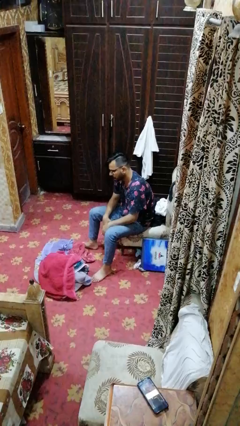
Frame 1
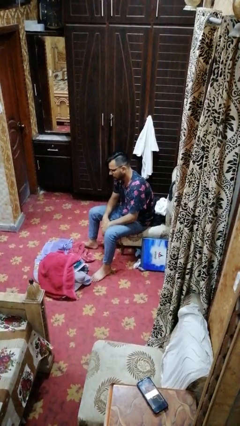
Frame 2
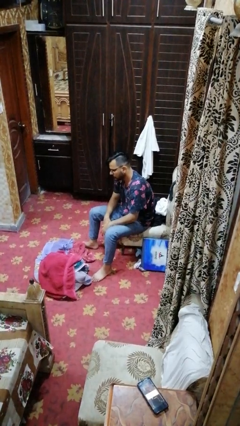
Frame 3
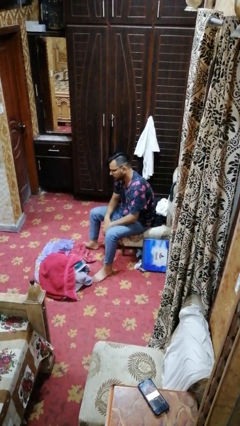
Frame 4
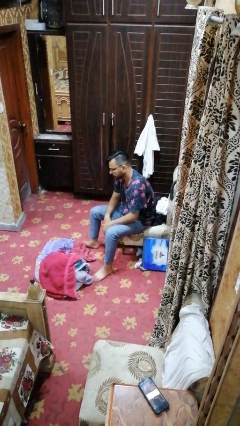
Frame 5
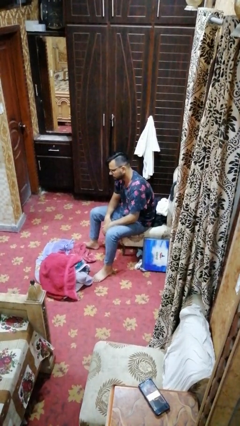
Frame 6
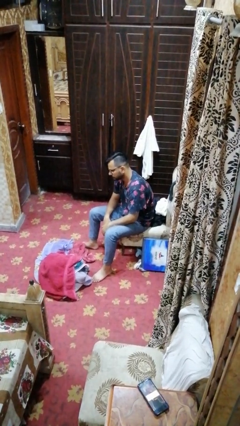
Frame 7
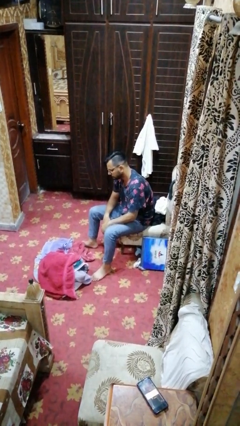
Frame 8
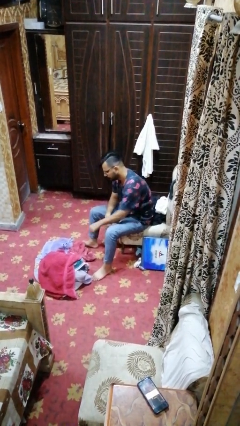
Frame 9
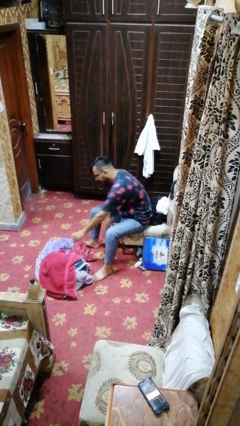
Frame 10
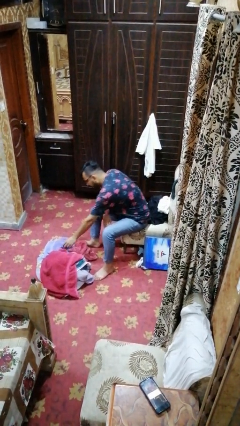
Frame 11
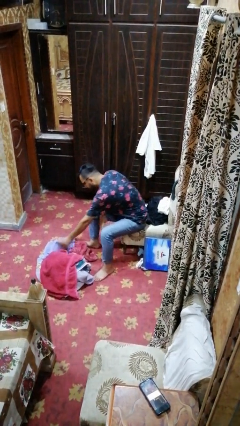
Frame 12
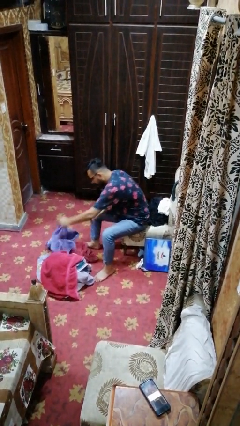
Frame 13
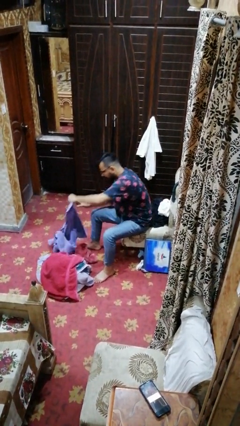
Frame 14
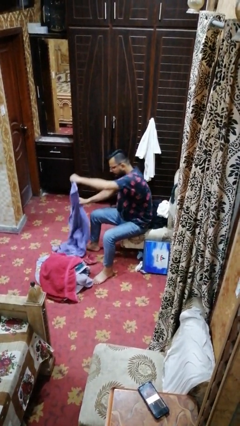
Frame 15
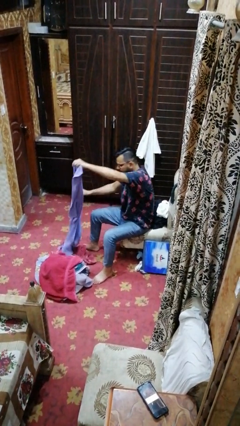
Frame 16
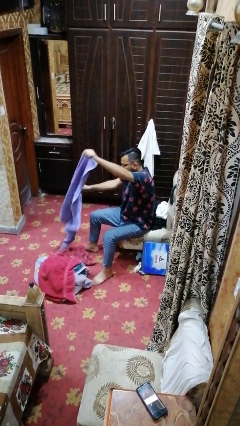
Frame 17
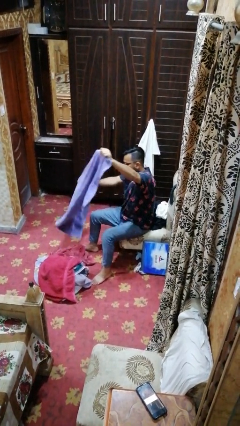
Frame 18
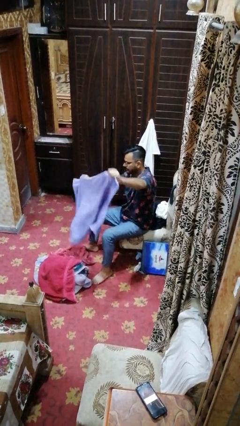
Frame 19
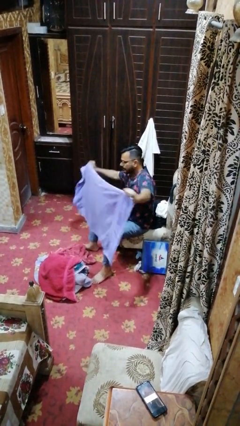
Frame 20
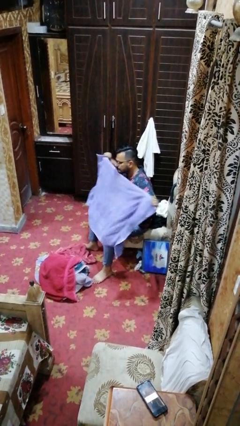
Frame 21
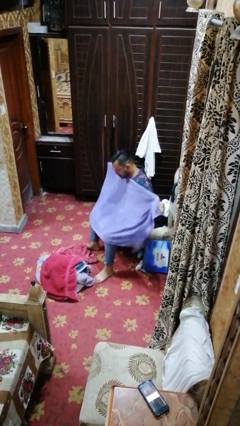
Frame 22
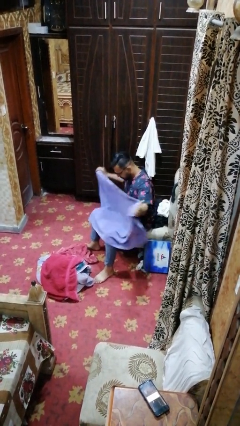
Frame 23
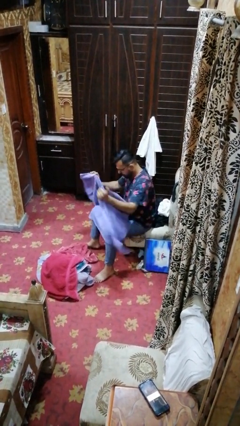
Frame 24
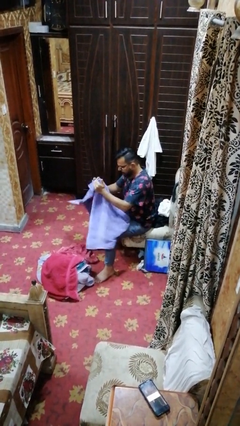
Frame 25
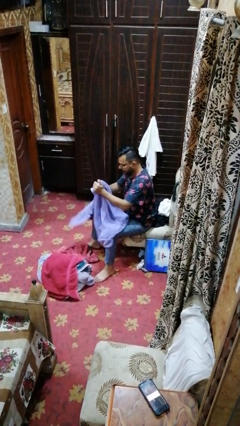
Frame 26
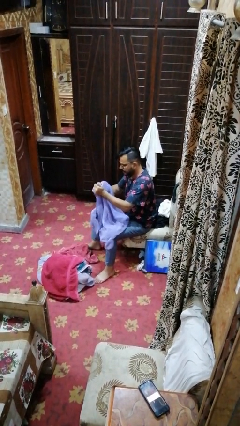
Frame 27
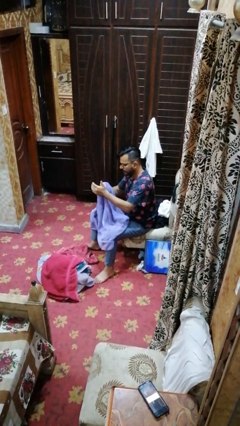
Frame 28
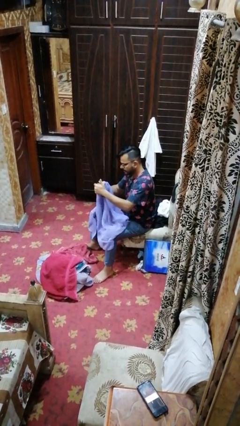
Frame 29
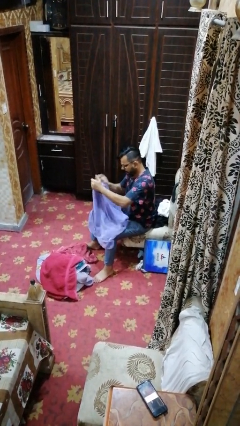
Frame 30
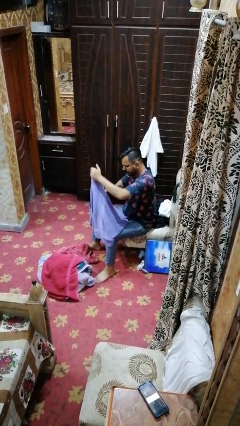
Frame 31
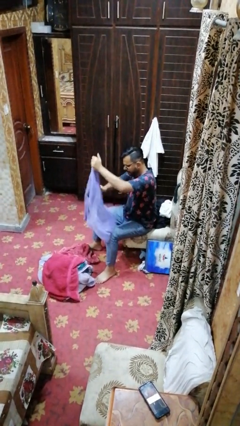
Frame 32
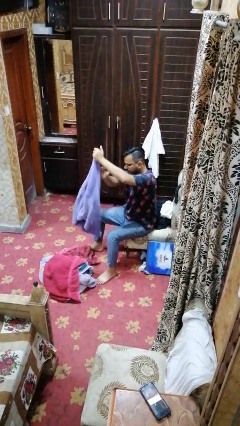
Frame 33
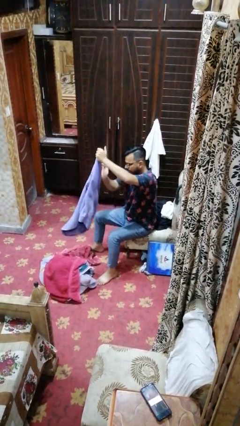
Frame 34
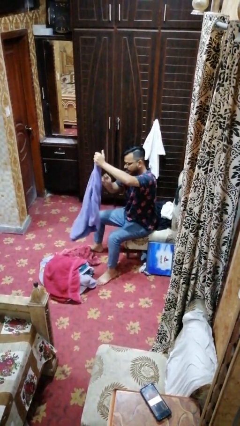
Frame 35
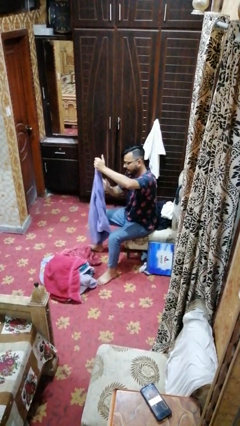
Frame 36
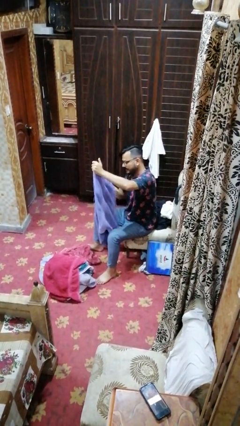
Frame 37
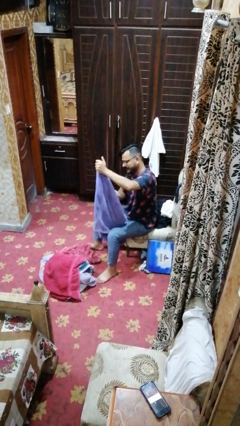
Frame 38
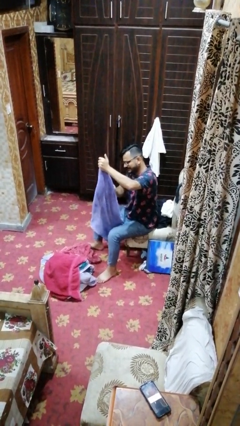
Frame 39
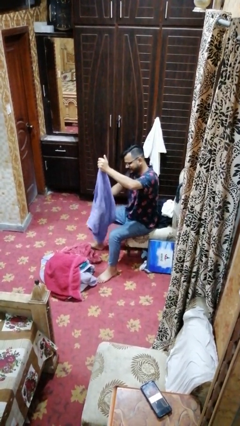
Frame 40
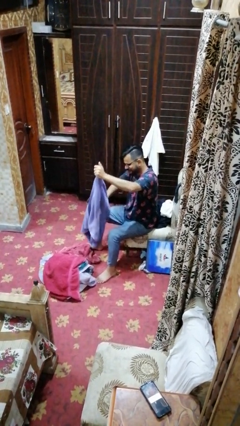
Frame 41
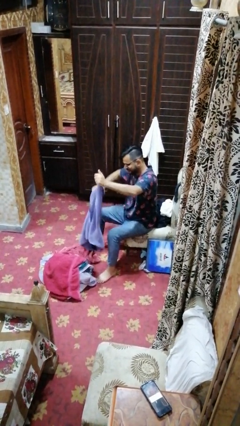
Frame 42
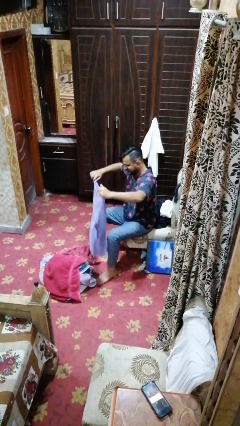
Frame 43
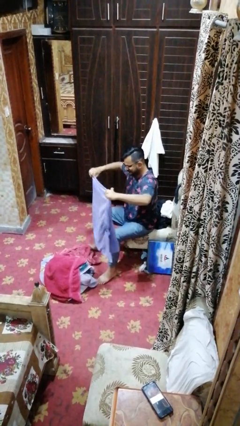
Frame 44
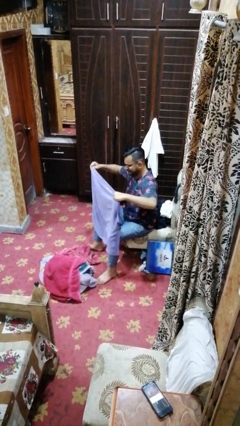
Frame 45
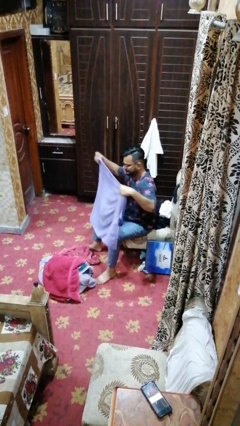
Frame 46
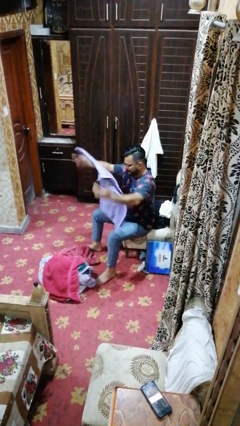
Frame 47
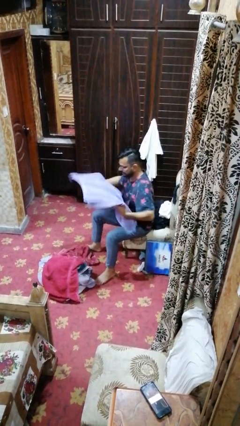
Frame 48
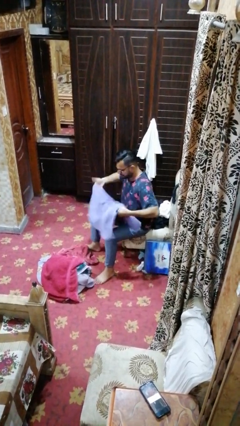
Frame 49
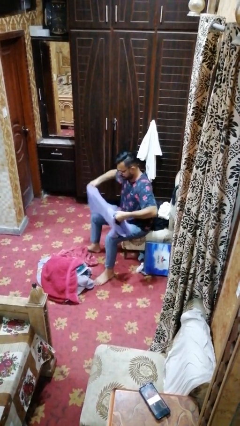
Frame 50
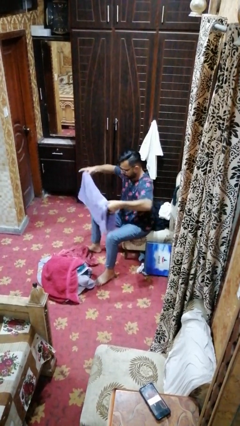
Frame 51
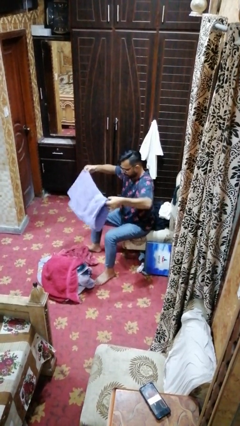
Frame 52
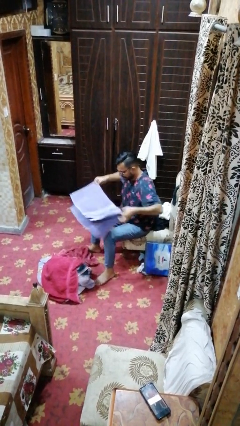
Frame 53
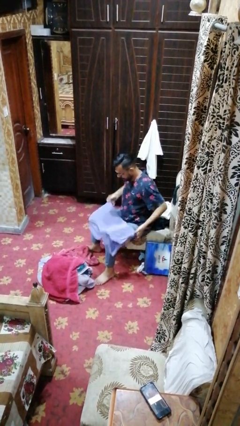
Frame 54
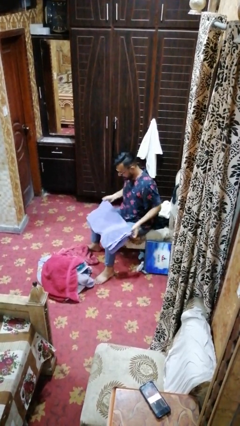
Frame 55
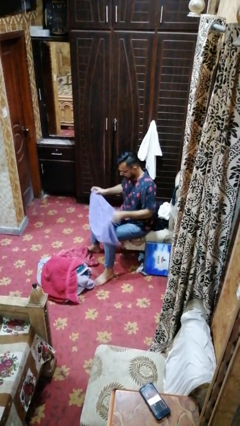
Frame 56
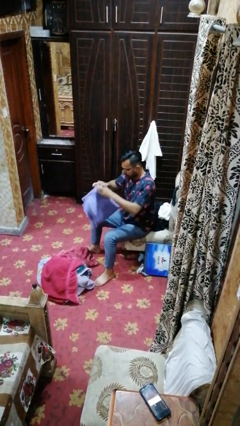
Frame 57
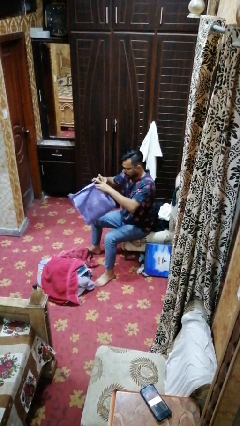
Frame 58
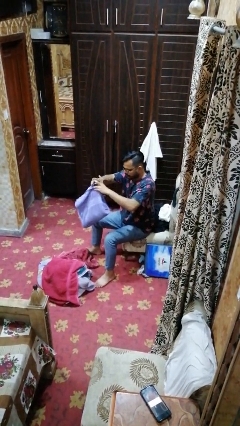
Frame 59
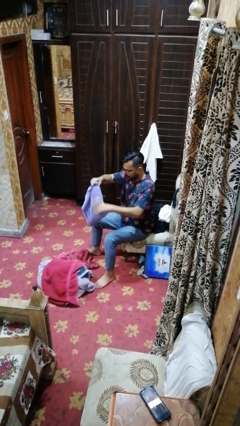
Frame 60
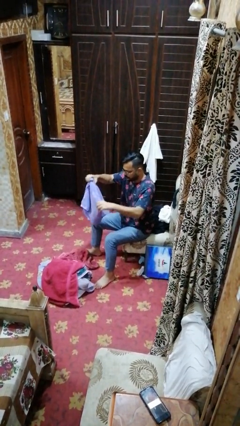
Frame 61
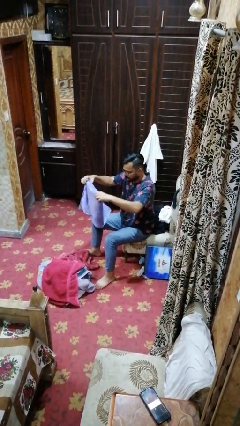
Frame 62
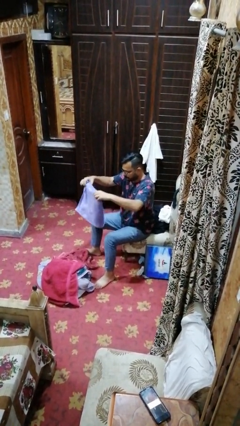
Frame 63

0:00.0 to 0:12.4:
person folds towel

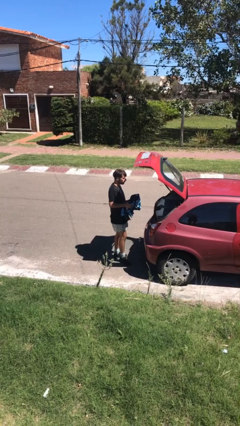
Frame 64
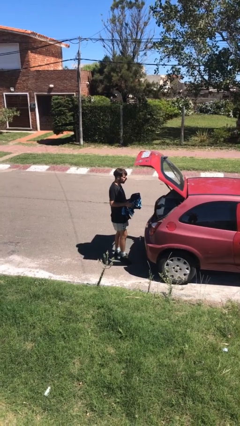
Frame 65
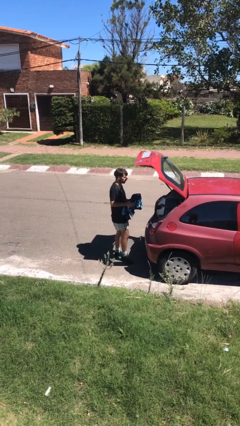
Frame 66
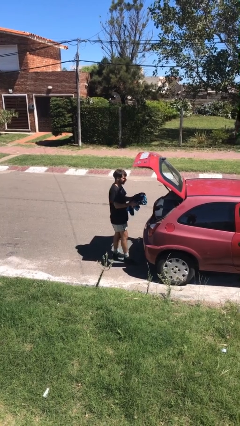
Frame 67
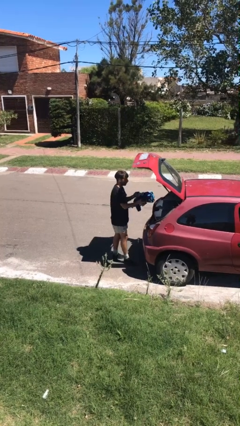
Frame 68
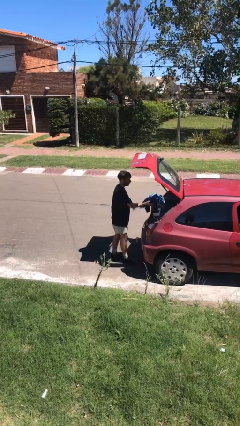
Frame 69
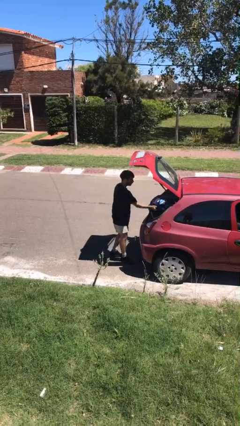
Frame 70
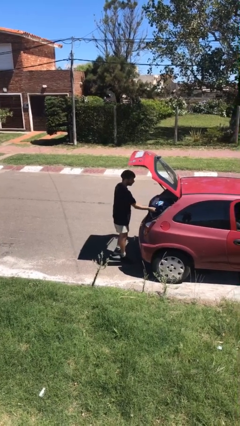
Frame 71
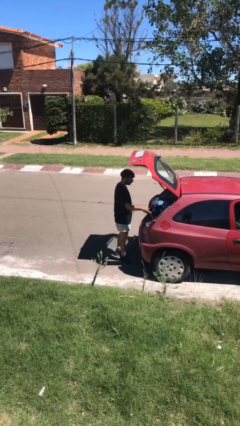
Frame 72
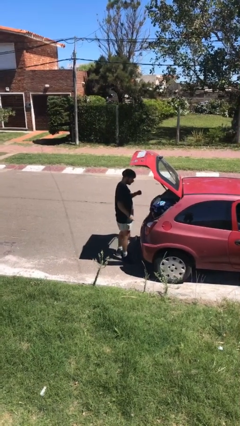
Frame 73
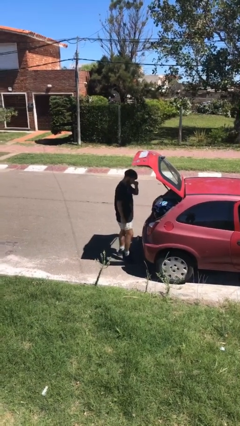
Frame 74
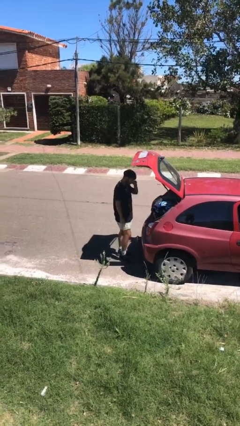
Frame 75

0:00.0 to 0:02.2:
person loads car

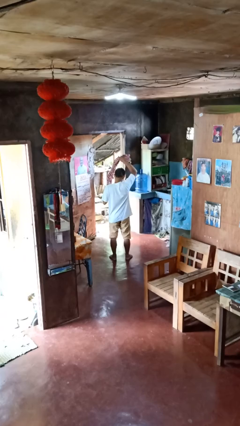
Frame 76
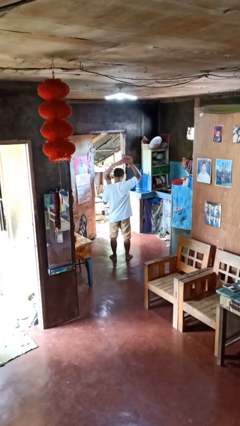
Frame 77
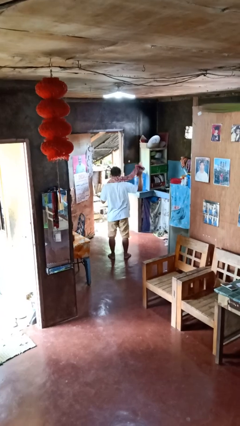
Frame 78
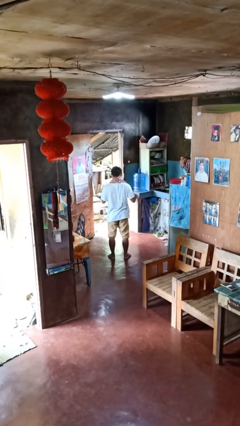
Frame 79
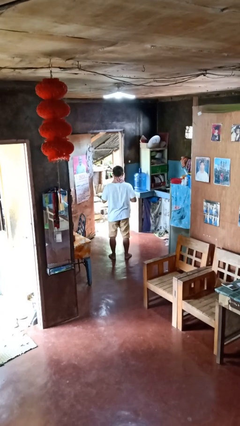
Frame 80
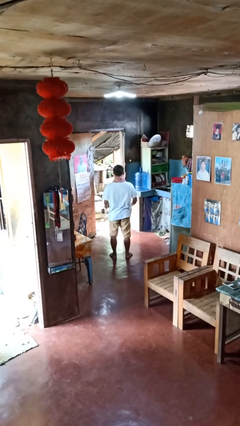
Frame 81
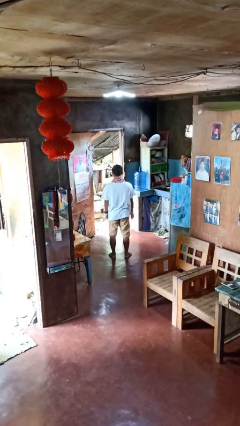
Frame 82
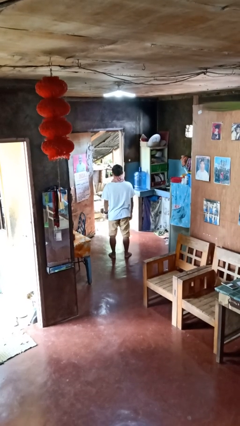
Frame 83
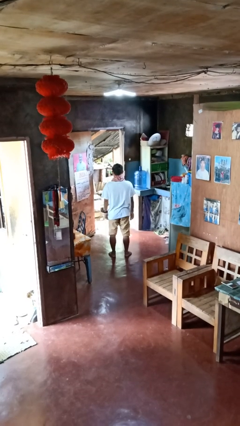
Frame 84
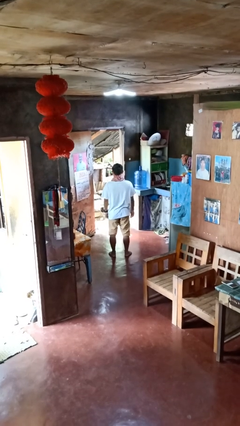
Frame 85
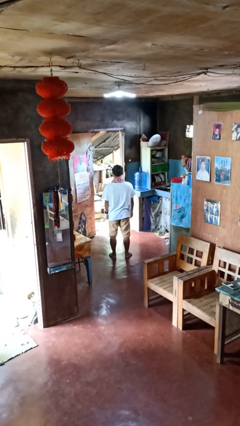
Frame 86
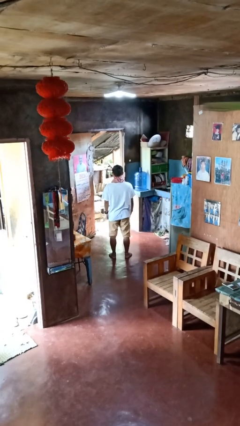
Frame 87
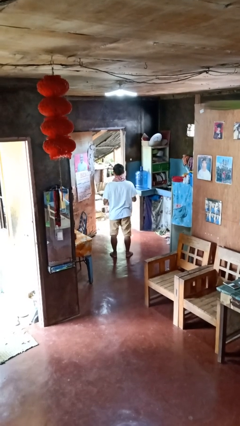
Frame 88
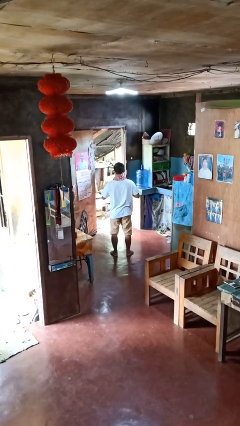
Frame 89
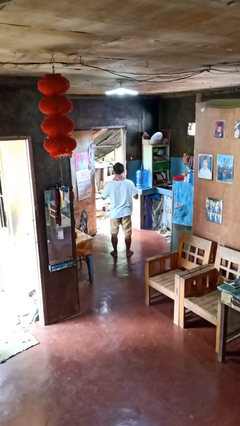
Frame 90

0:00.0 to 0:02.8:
person puts on scarf
